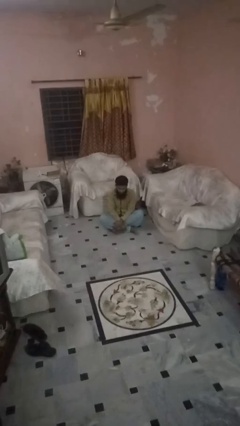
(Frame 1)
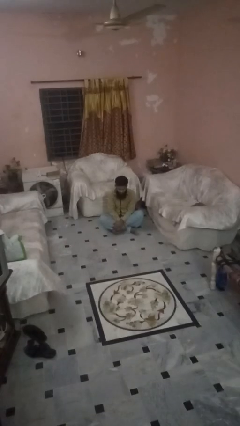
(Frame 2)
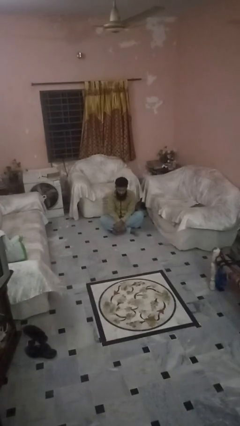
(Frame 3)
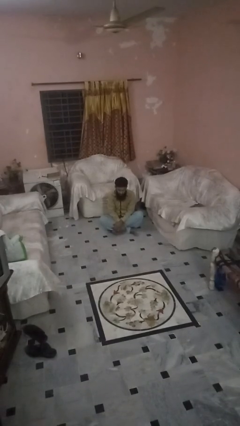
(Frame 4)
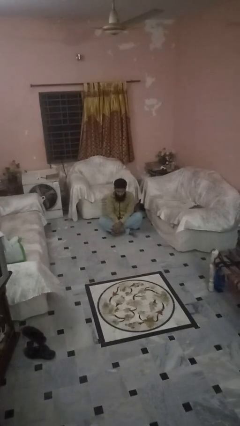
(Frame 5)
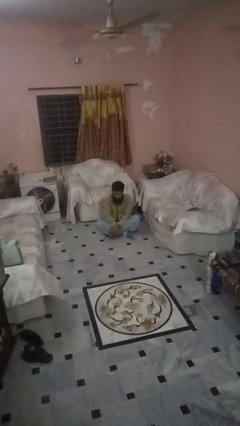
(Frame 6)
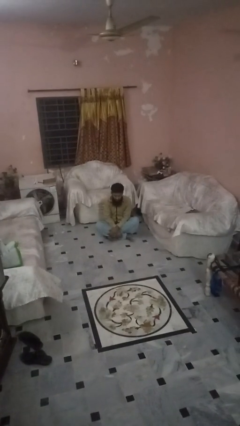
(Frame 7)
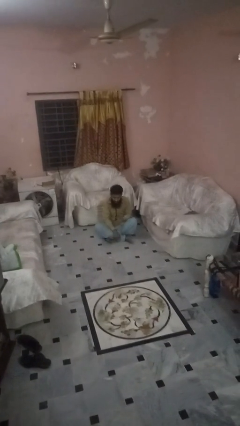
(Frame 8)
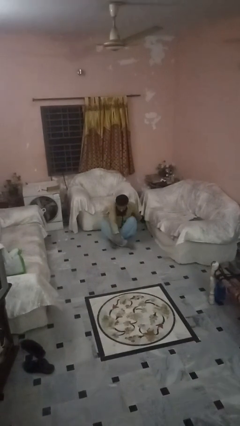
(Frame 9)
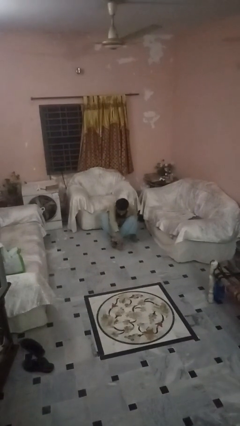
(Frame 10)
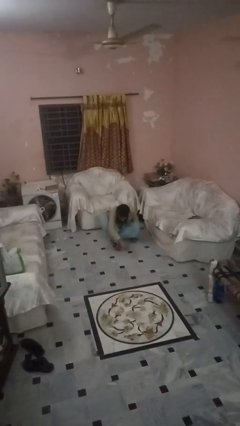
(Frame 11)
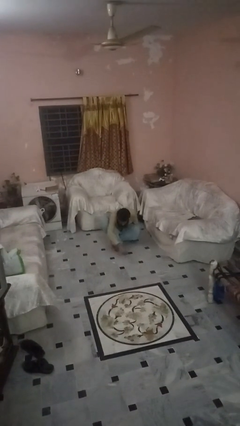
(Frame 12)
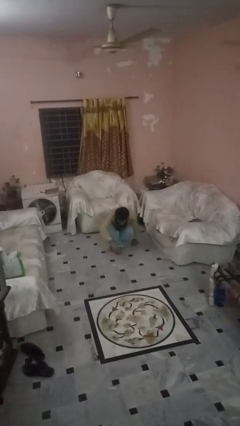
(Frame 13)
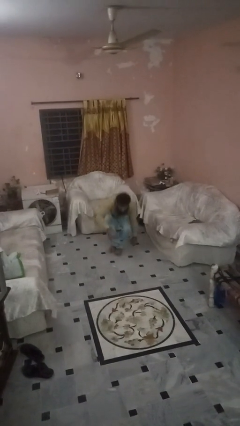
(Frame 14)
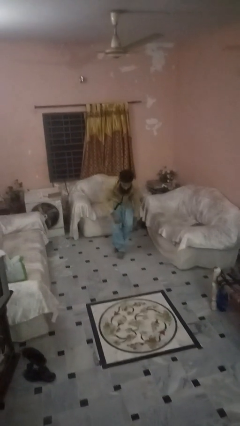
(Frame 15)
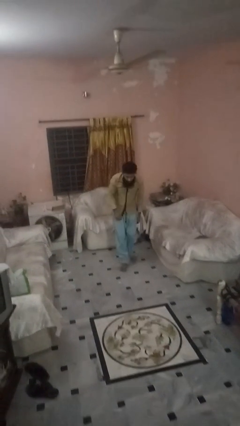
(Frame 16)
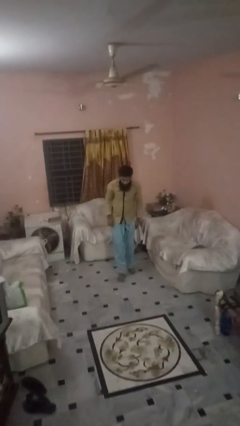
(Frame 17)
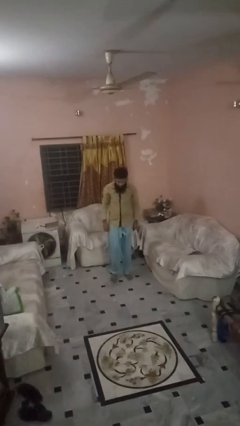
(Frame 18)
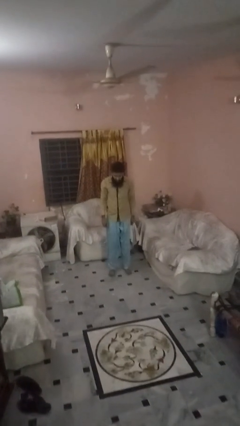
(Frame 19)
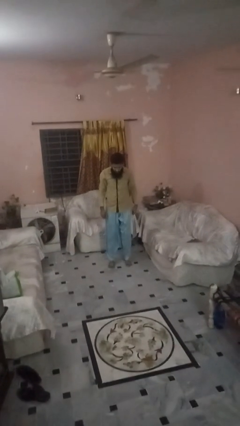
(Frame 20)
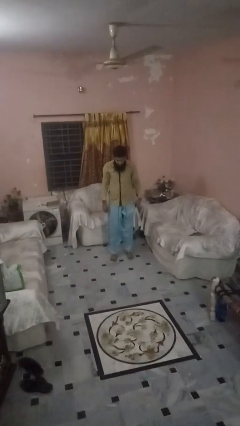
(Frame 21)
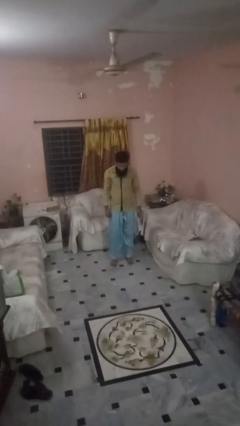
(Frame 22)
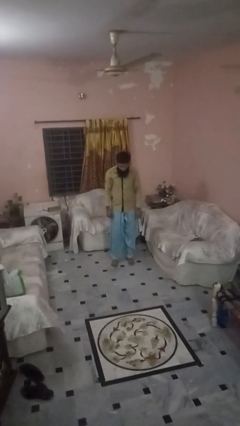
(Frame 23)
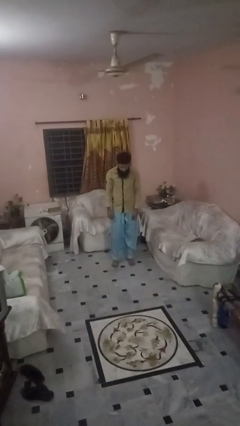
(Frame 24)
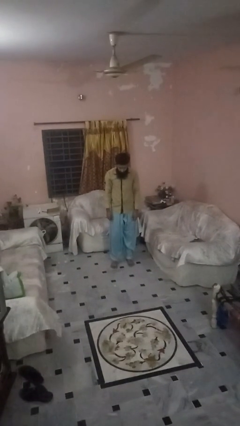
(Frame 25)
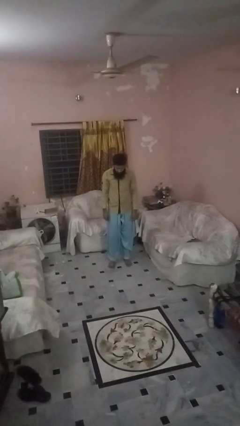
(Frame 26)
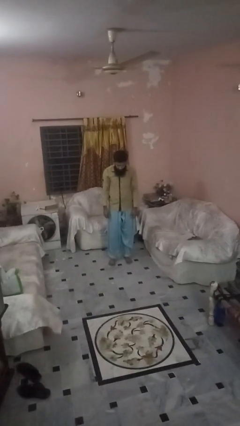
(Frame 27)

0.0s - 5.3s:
person stands up from floor

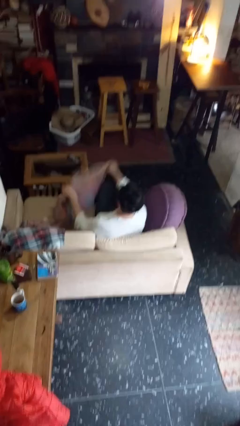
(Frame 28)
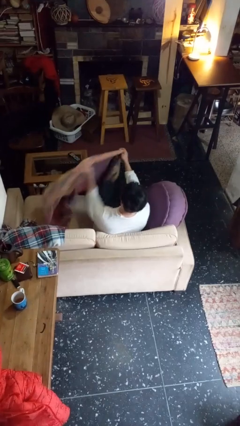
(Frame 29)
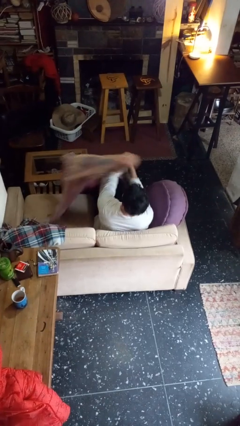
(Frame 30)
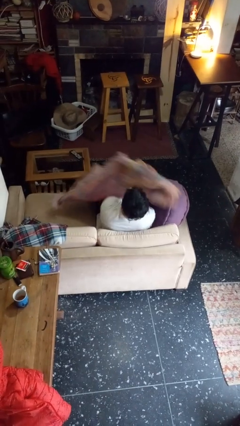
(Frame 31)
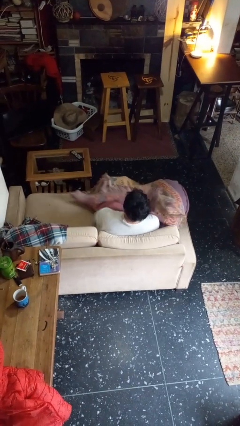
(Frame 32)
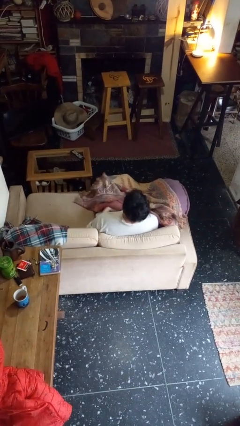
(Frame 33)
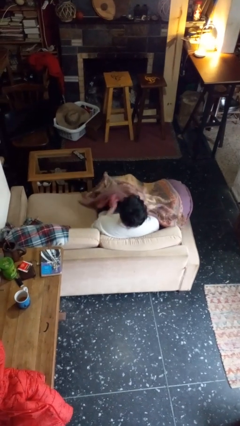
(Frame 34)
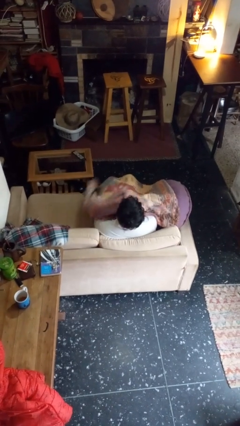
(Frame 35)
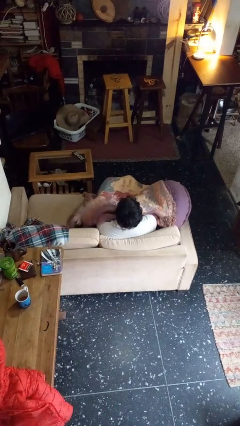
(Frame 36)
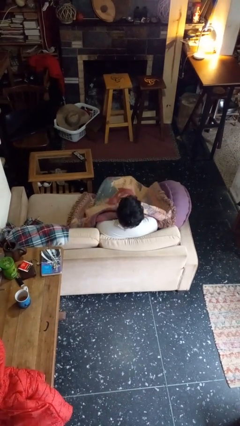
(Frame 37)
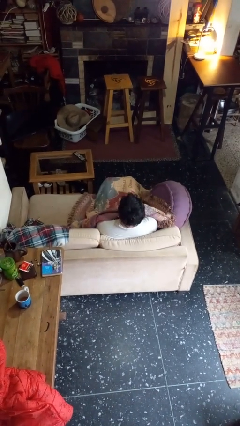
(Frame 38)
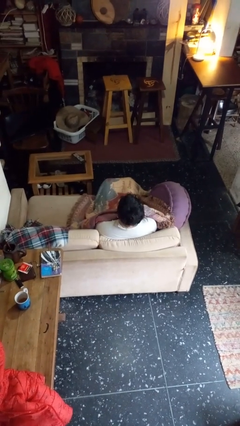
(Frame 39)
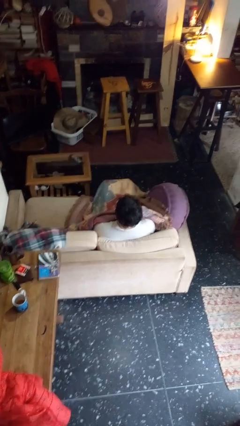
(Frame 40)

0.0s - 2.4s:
person covers with blanket

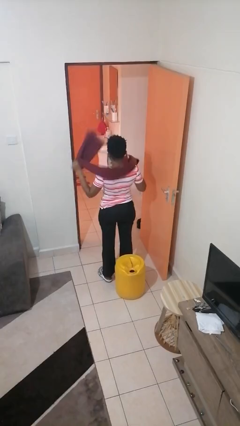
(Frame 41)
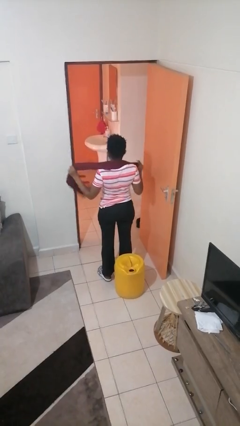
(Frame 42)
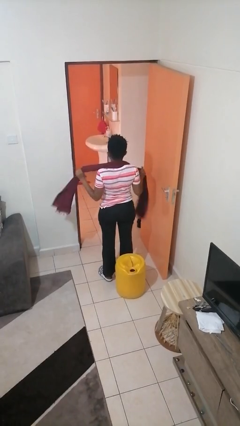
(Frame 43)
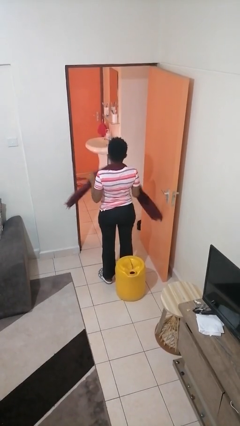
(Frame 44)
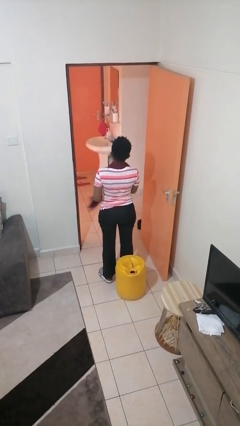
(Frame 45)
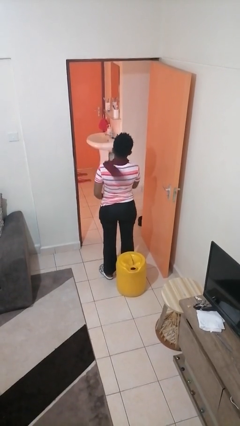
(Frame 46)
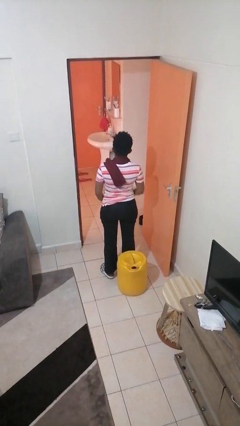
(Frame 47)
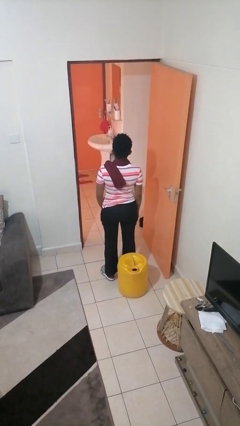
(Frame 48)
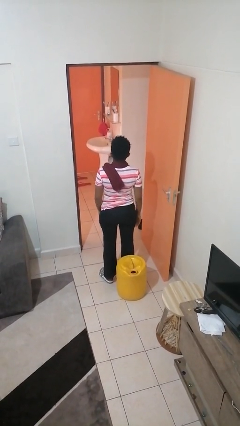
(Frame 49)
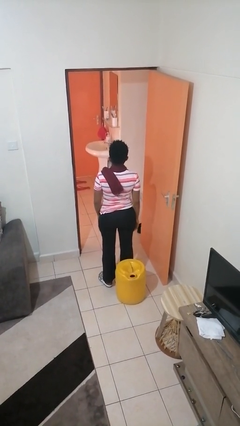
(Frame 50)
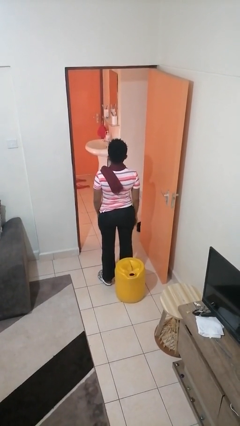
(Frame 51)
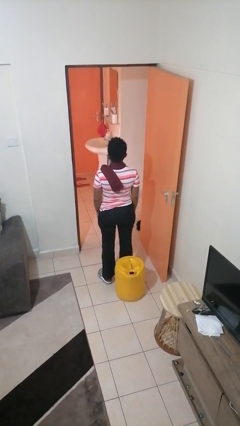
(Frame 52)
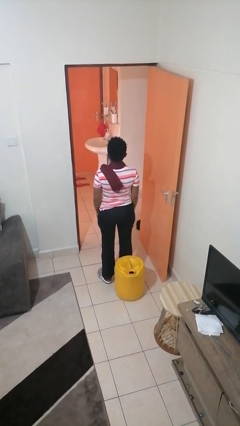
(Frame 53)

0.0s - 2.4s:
person puts on scarf

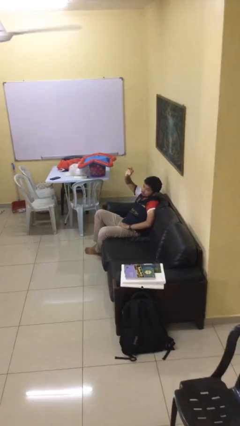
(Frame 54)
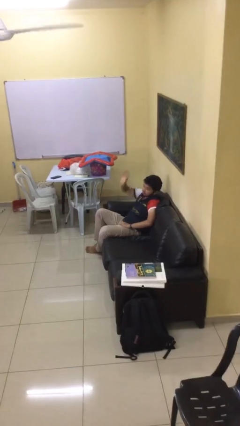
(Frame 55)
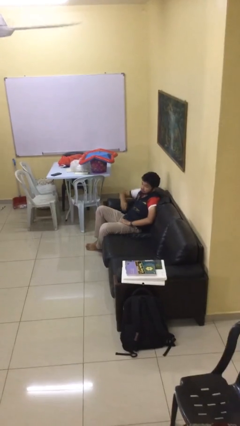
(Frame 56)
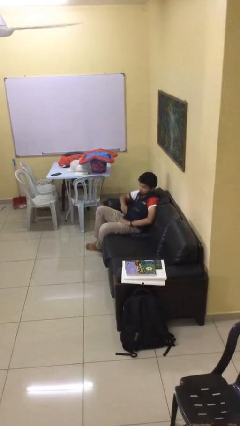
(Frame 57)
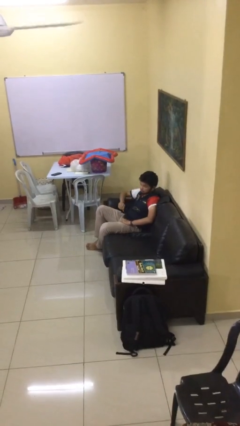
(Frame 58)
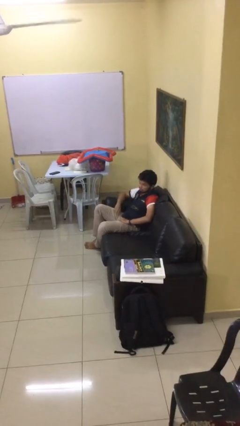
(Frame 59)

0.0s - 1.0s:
person gestures swipe down

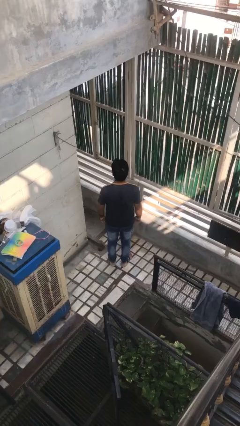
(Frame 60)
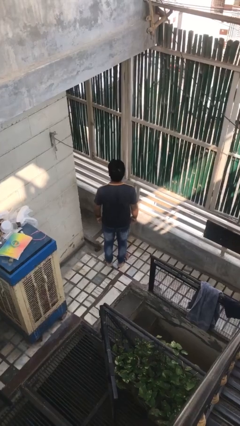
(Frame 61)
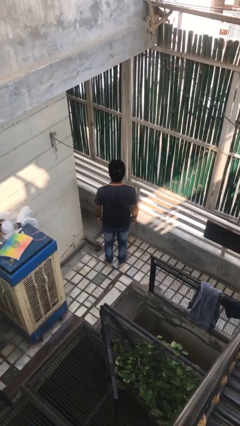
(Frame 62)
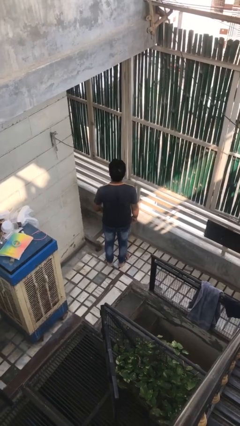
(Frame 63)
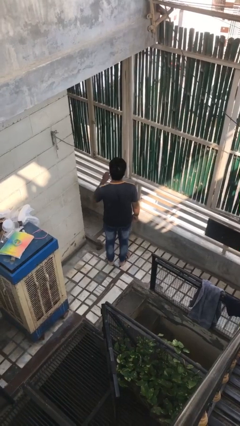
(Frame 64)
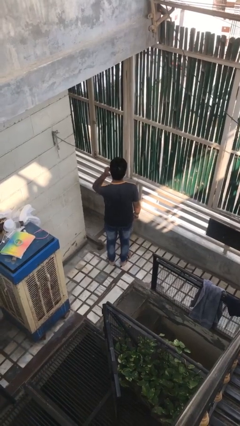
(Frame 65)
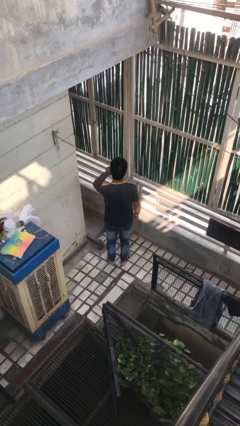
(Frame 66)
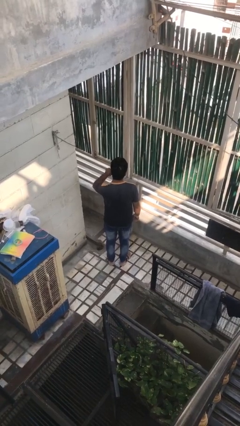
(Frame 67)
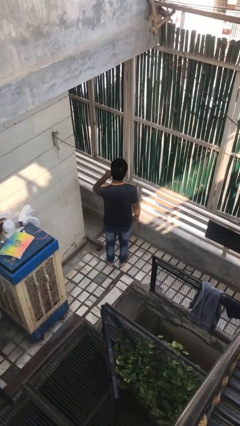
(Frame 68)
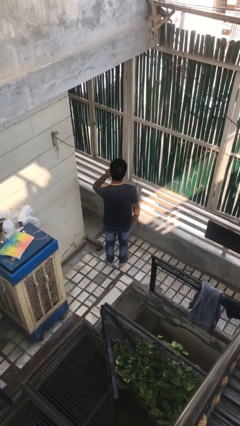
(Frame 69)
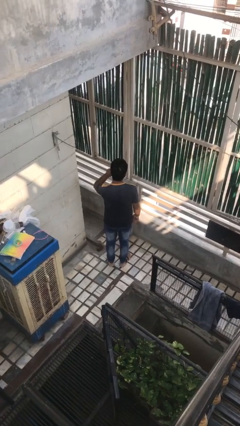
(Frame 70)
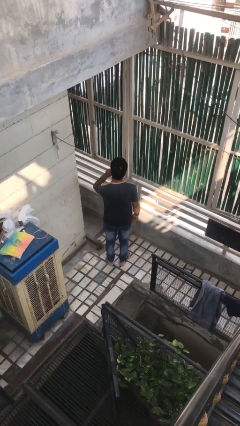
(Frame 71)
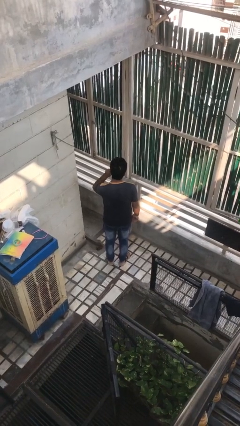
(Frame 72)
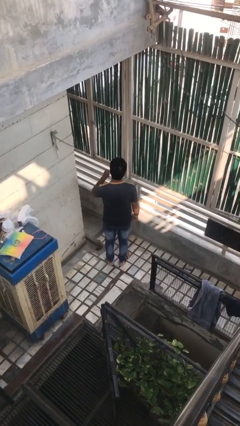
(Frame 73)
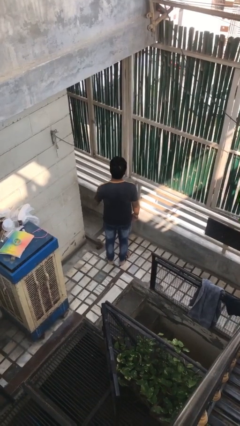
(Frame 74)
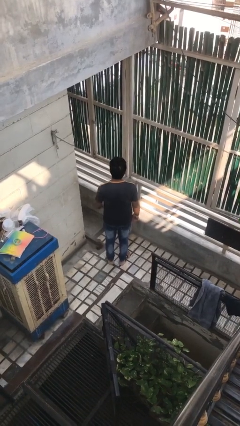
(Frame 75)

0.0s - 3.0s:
person touches earlobe

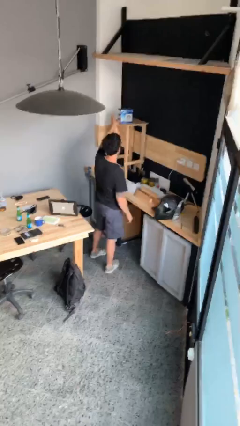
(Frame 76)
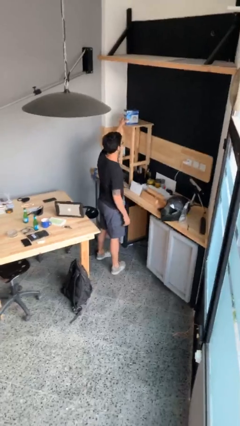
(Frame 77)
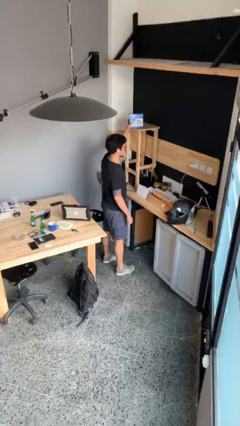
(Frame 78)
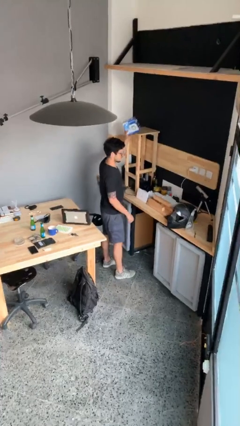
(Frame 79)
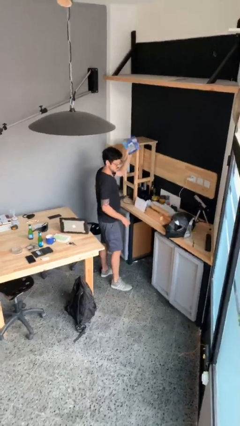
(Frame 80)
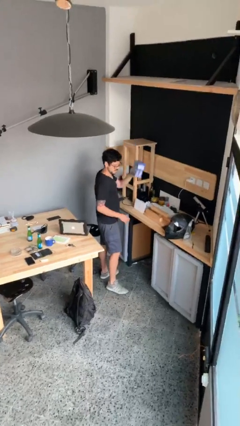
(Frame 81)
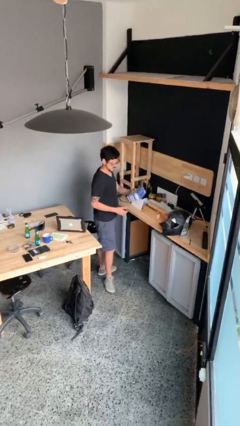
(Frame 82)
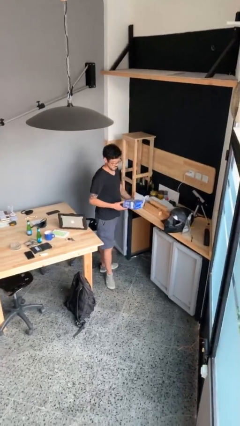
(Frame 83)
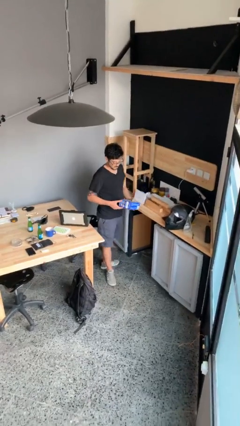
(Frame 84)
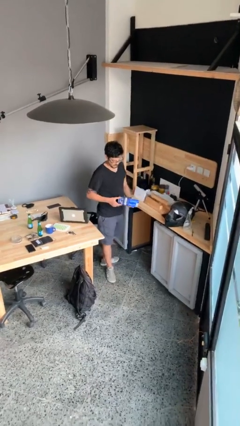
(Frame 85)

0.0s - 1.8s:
person picks up object from shelf

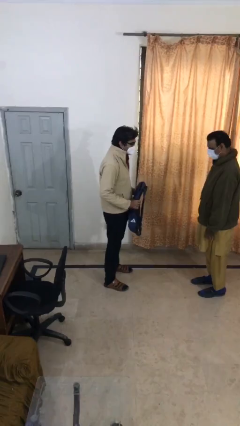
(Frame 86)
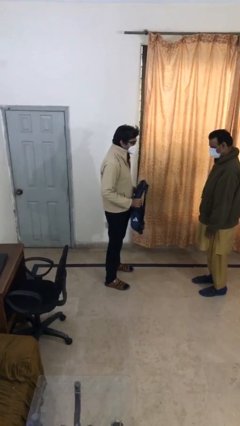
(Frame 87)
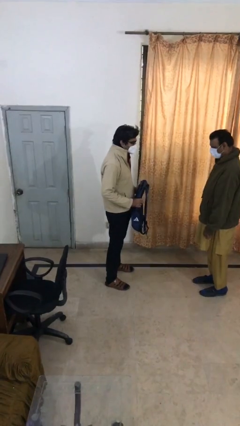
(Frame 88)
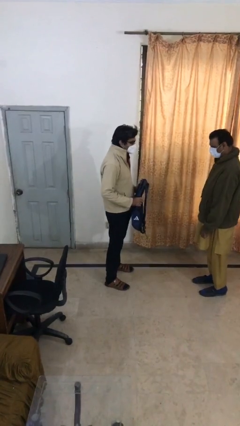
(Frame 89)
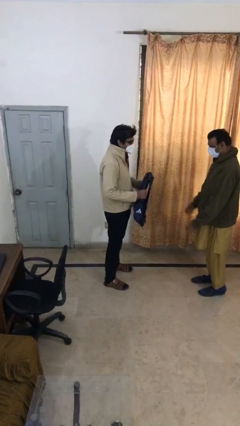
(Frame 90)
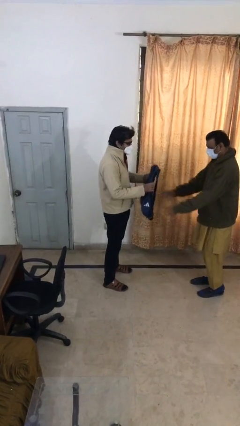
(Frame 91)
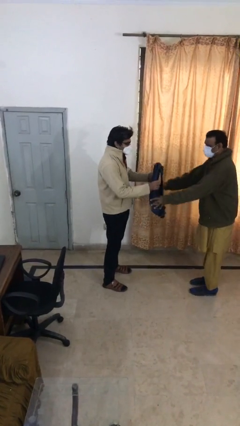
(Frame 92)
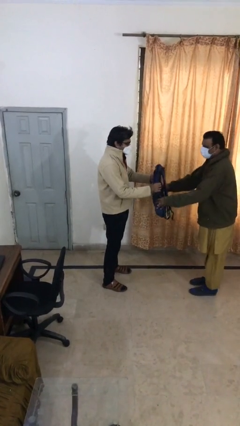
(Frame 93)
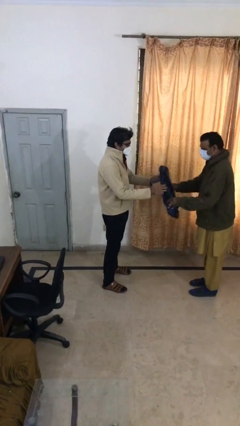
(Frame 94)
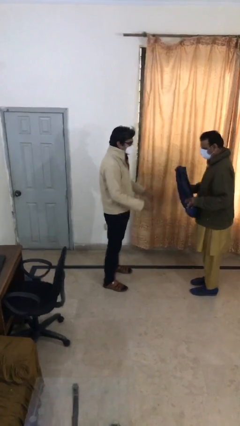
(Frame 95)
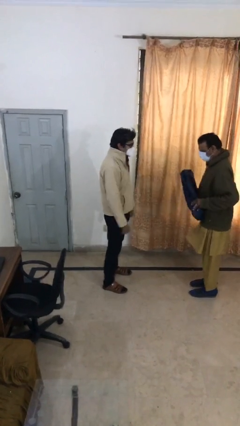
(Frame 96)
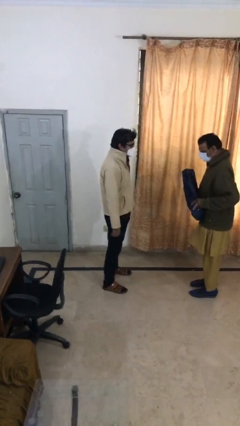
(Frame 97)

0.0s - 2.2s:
person transfers object to person
